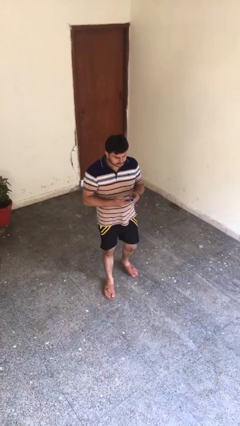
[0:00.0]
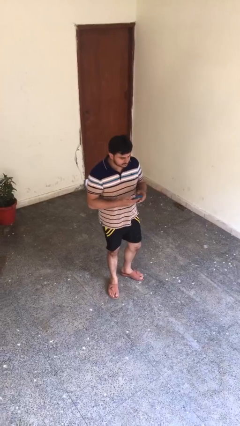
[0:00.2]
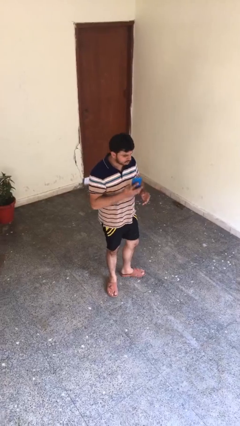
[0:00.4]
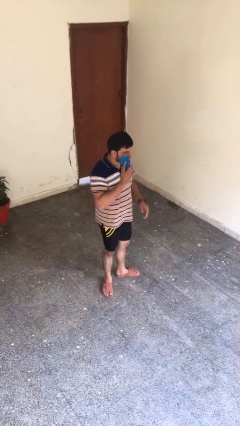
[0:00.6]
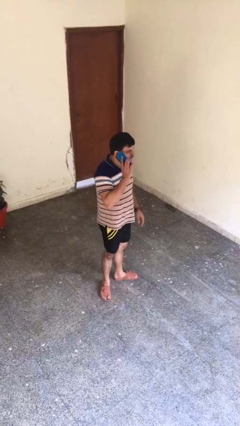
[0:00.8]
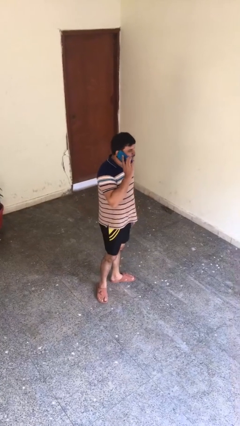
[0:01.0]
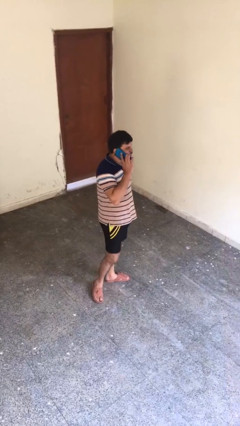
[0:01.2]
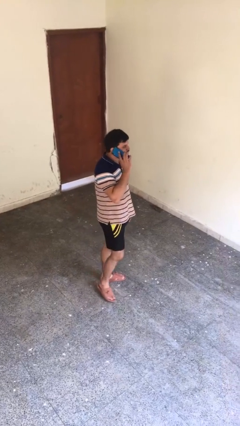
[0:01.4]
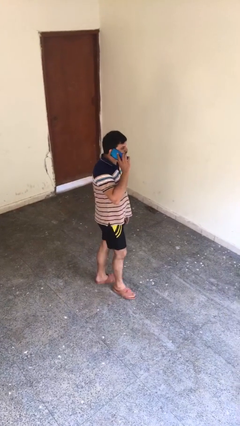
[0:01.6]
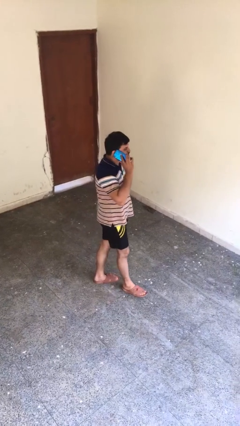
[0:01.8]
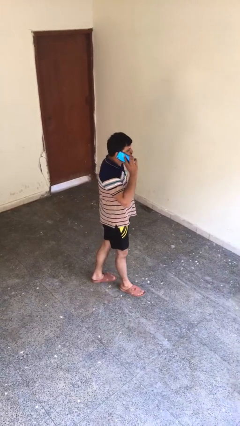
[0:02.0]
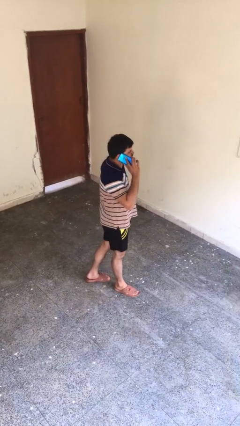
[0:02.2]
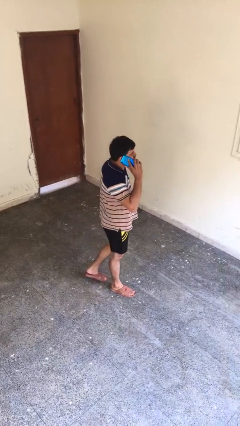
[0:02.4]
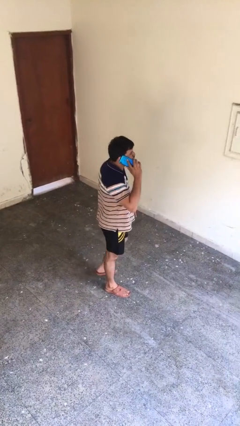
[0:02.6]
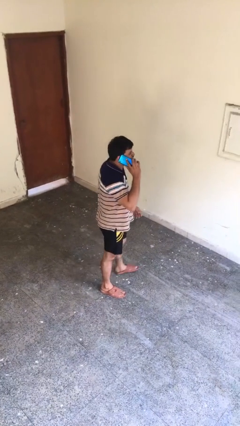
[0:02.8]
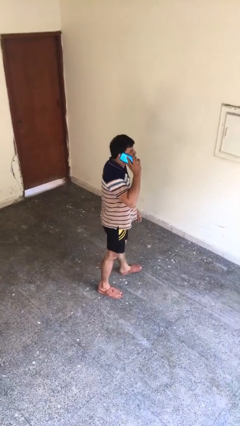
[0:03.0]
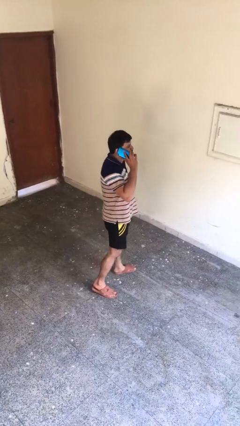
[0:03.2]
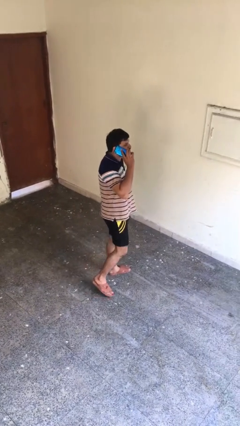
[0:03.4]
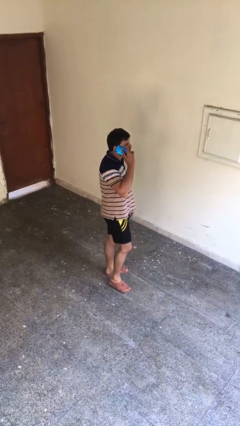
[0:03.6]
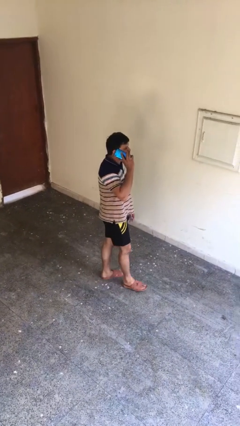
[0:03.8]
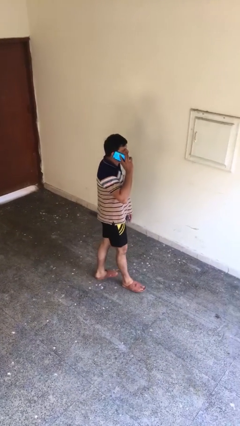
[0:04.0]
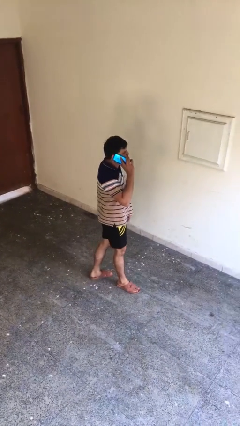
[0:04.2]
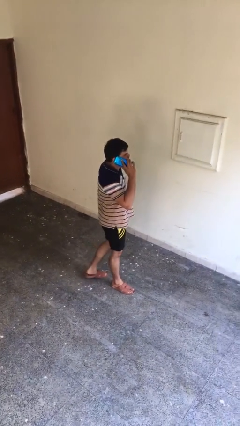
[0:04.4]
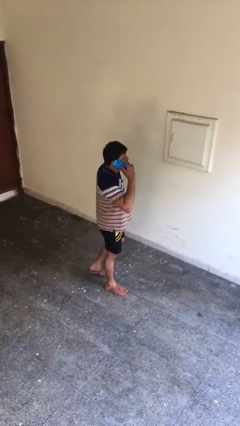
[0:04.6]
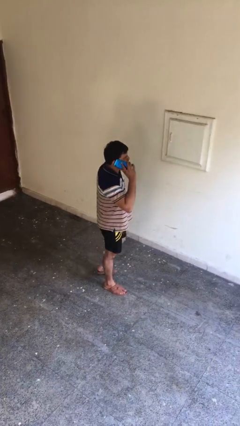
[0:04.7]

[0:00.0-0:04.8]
person talks on phone

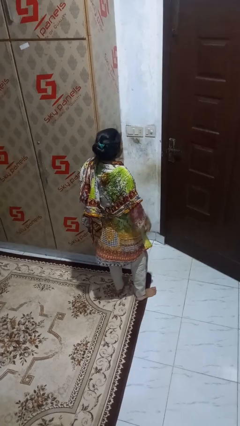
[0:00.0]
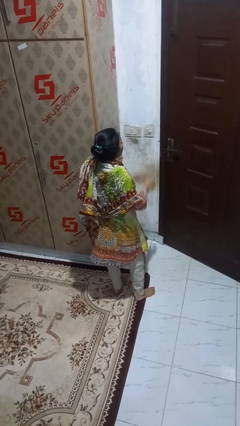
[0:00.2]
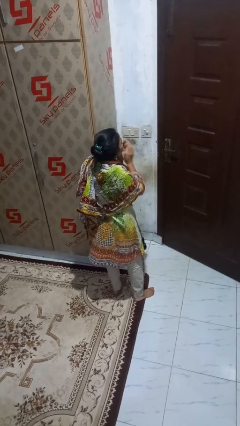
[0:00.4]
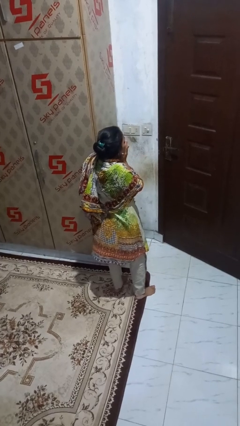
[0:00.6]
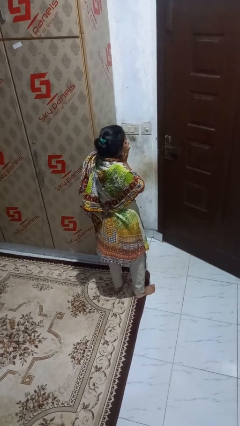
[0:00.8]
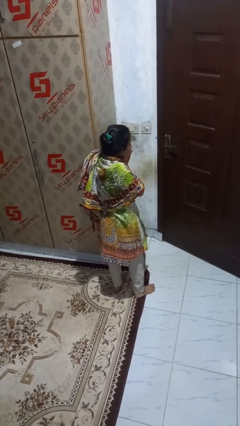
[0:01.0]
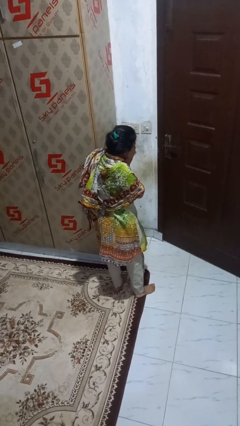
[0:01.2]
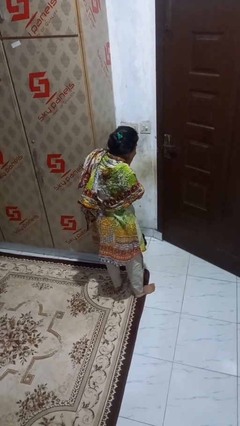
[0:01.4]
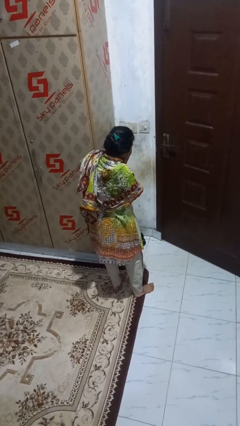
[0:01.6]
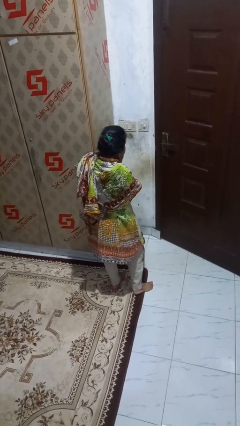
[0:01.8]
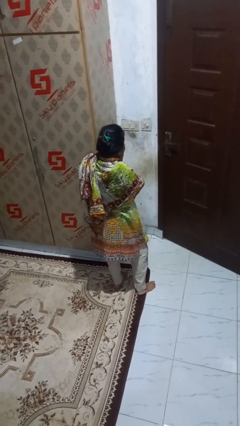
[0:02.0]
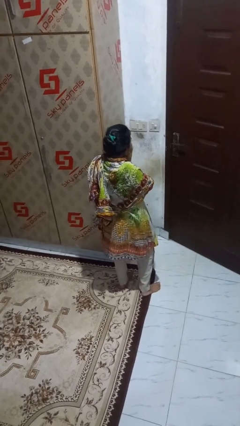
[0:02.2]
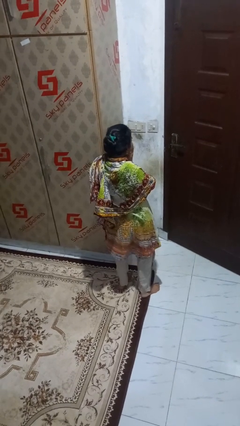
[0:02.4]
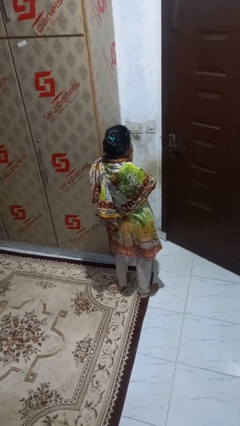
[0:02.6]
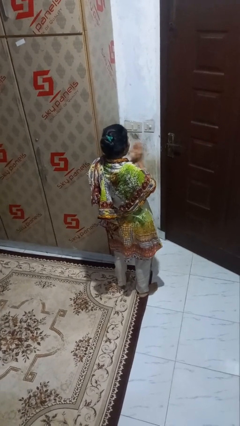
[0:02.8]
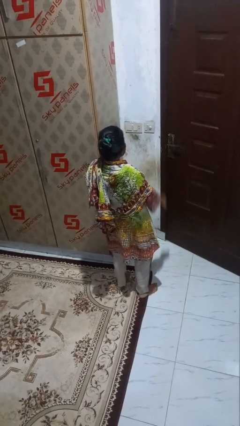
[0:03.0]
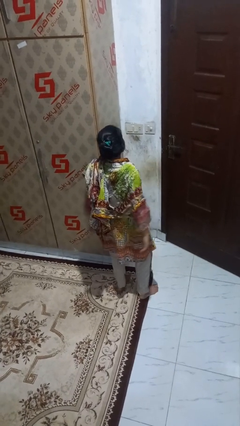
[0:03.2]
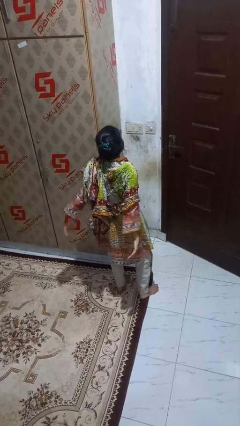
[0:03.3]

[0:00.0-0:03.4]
person sneezes into hand

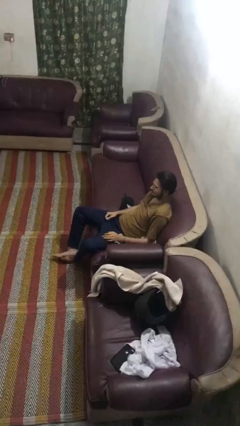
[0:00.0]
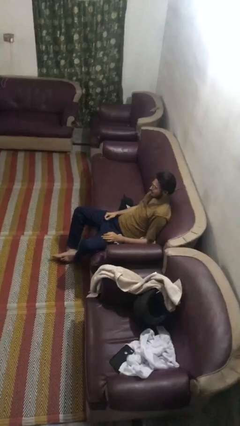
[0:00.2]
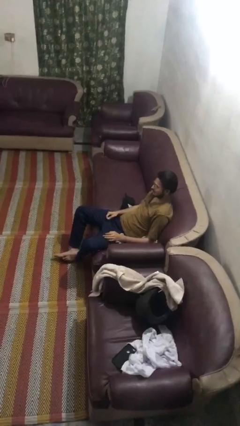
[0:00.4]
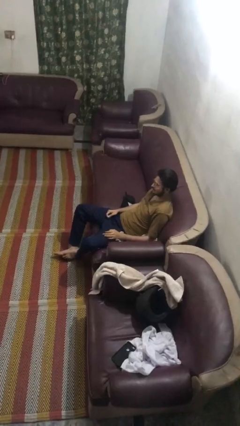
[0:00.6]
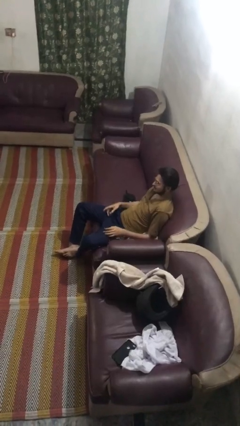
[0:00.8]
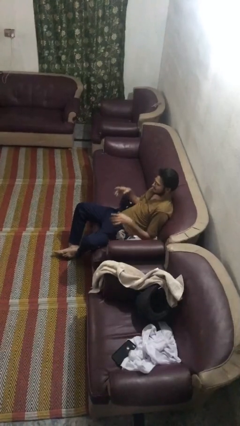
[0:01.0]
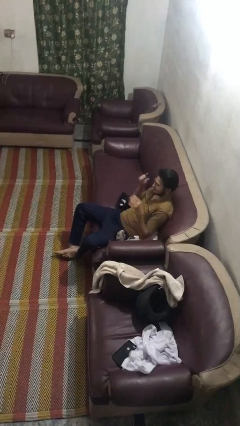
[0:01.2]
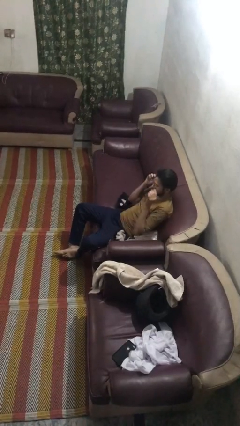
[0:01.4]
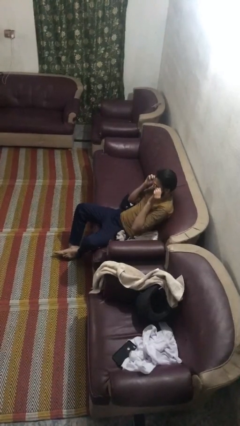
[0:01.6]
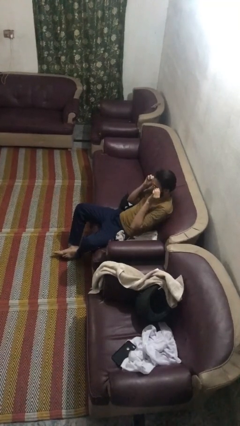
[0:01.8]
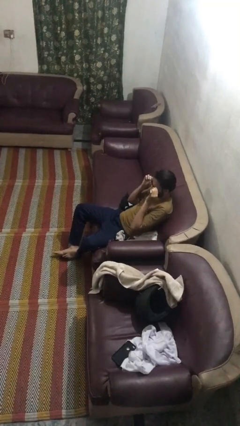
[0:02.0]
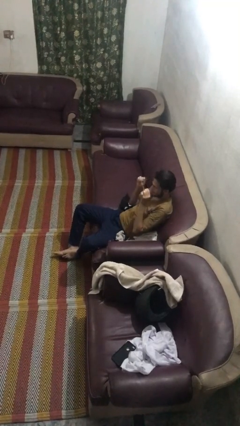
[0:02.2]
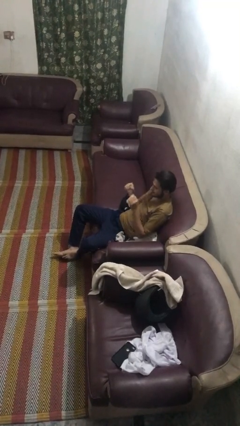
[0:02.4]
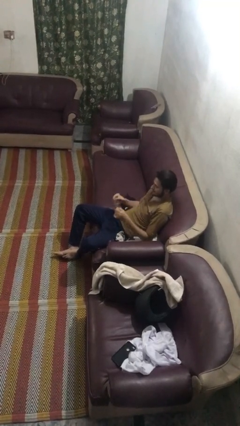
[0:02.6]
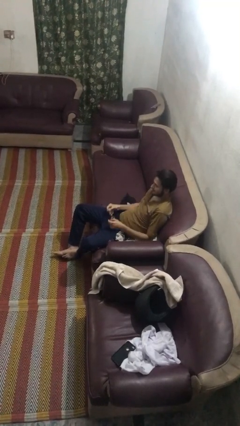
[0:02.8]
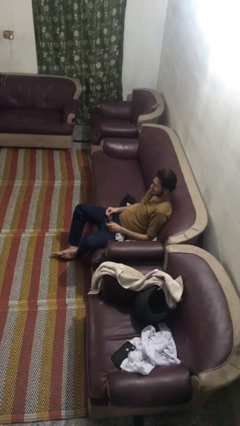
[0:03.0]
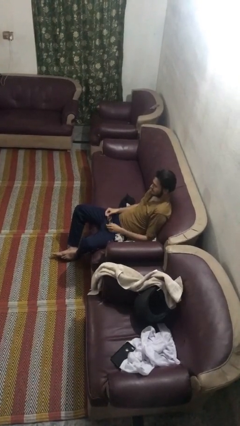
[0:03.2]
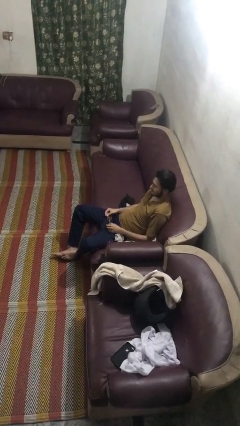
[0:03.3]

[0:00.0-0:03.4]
person takes off glasses

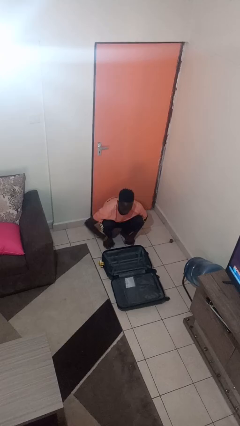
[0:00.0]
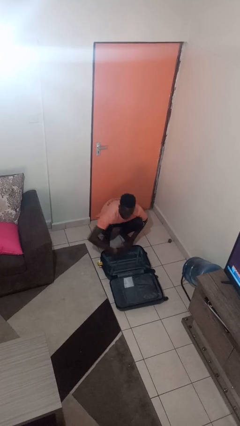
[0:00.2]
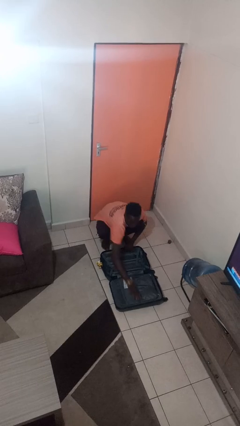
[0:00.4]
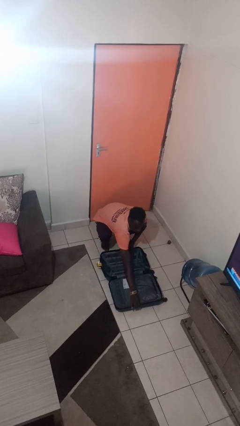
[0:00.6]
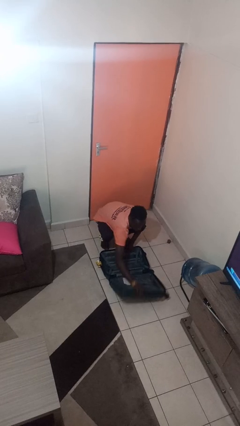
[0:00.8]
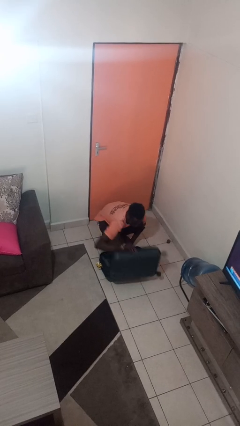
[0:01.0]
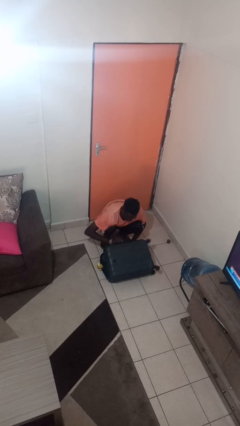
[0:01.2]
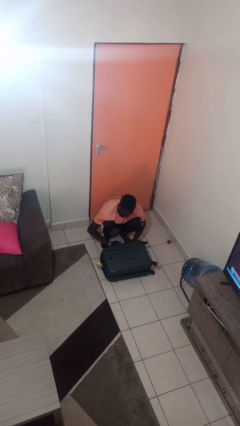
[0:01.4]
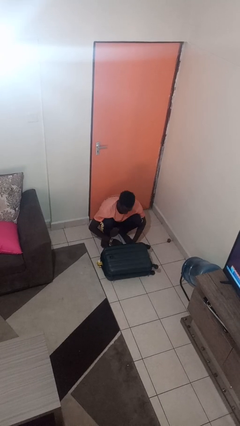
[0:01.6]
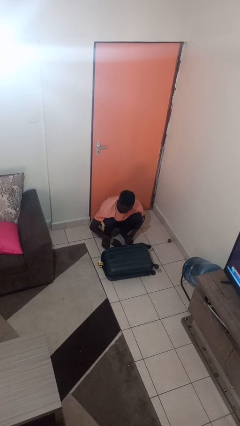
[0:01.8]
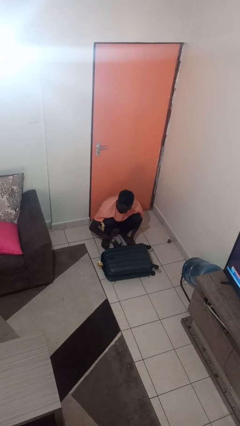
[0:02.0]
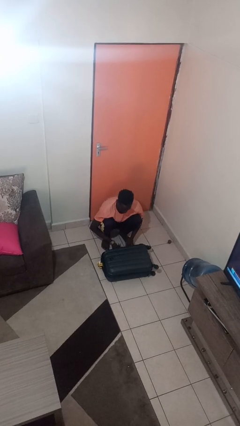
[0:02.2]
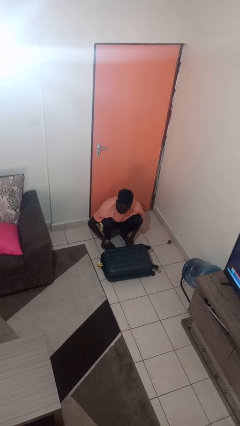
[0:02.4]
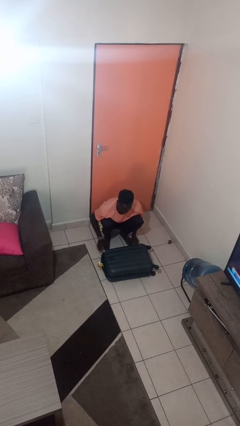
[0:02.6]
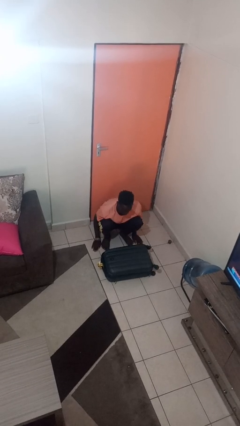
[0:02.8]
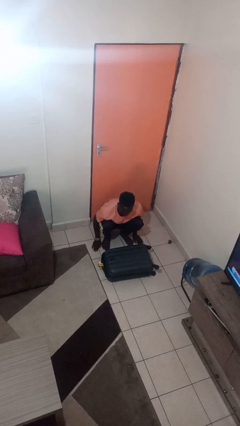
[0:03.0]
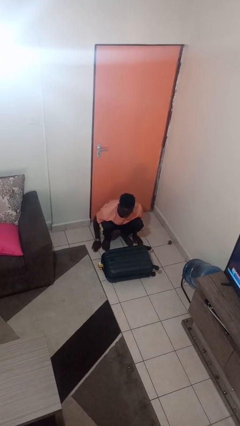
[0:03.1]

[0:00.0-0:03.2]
person closes suitcase

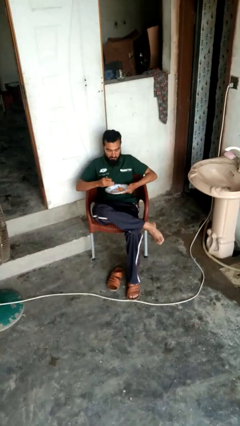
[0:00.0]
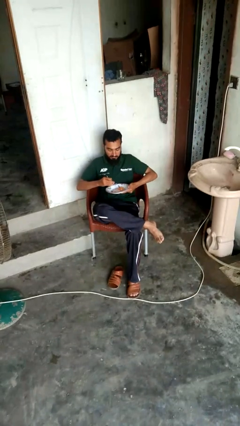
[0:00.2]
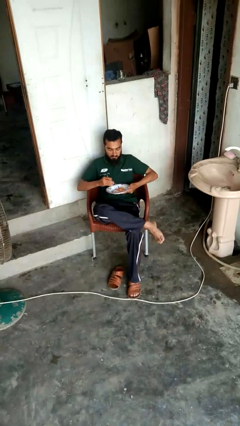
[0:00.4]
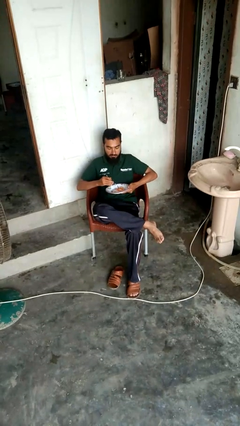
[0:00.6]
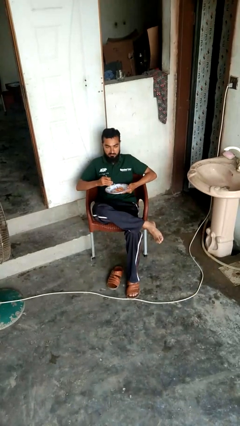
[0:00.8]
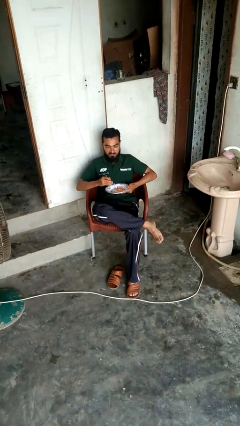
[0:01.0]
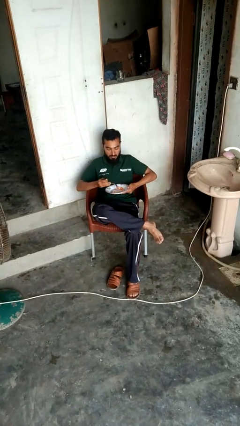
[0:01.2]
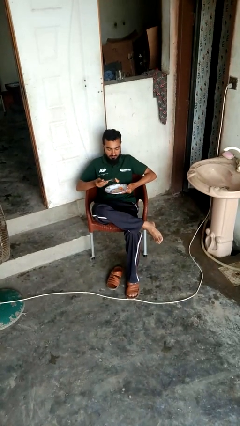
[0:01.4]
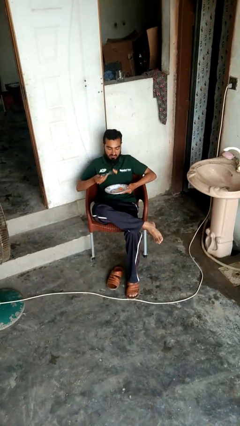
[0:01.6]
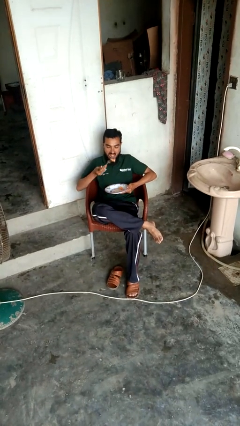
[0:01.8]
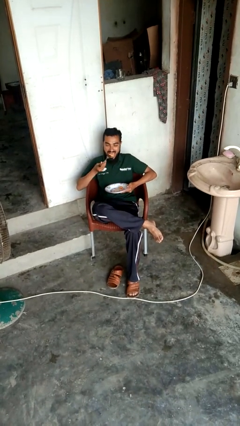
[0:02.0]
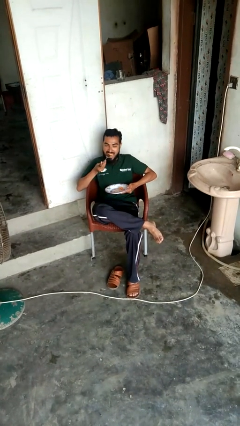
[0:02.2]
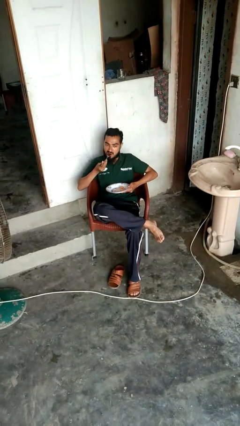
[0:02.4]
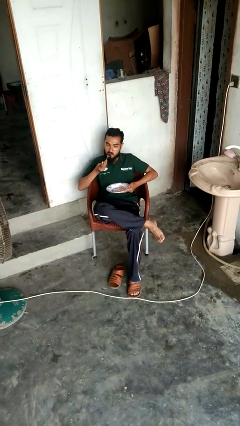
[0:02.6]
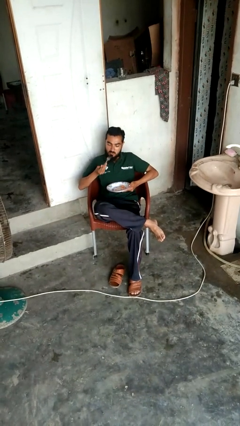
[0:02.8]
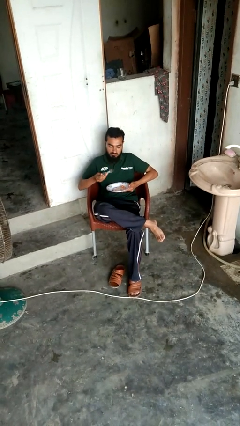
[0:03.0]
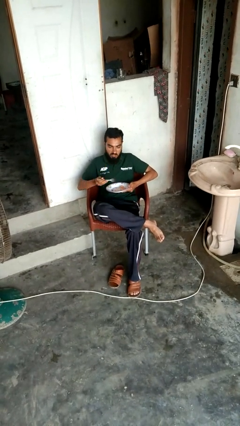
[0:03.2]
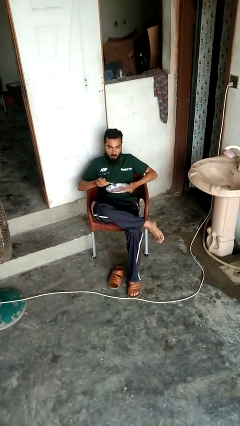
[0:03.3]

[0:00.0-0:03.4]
person eats with utensil
